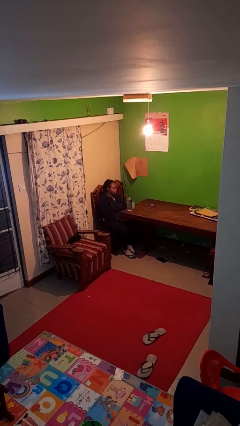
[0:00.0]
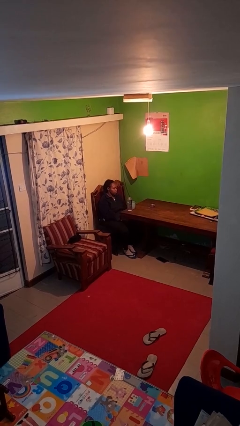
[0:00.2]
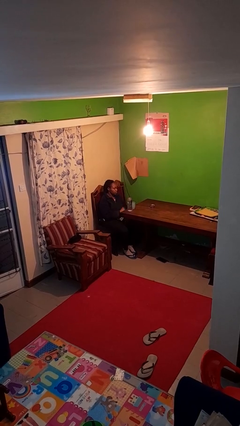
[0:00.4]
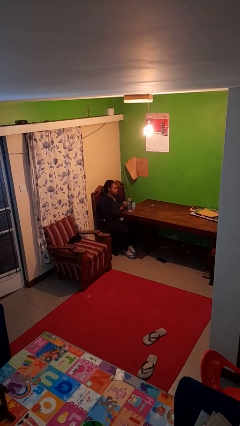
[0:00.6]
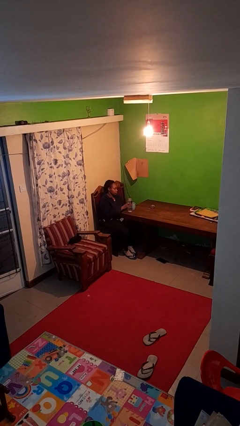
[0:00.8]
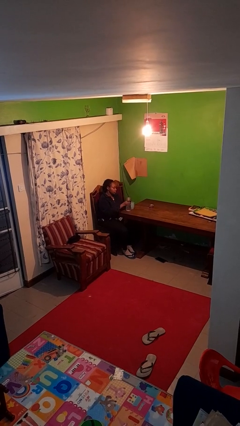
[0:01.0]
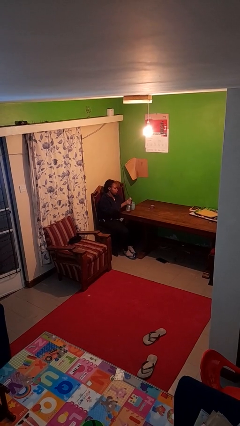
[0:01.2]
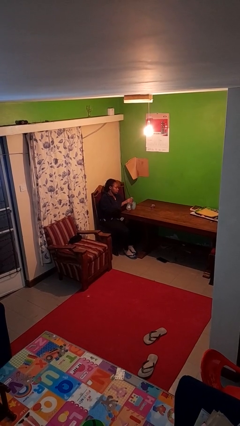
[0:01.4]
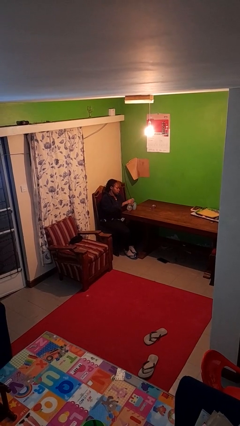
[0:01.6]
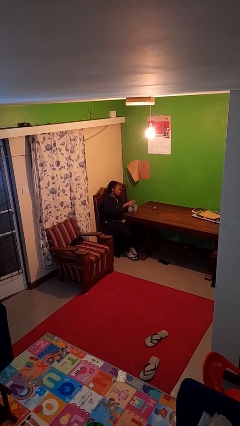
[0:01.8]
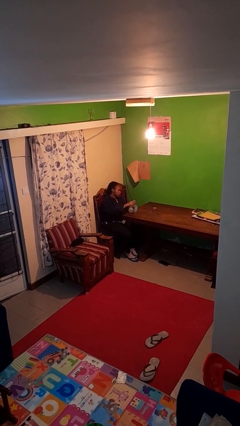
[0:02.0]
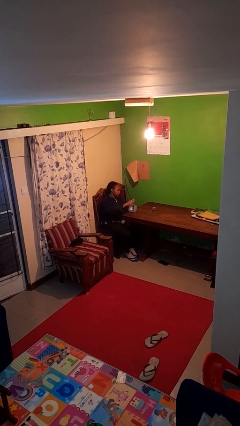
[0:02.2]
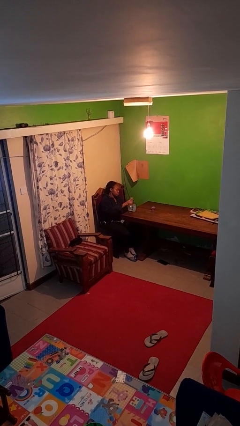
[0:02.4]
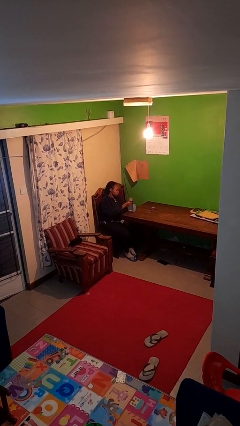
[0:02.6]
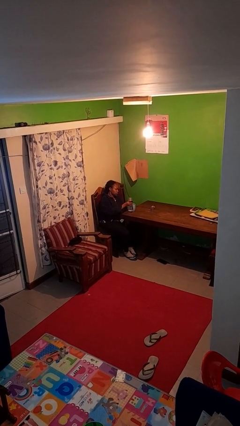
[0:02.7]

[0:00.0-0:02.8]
person pours liquid into cup

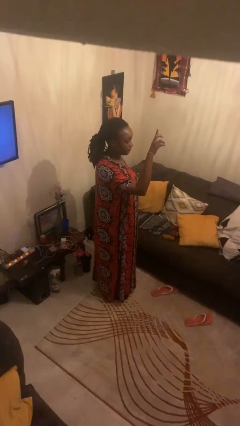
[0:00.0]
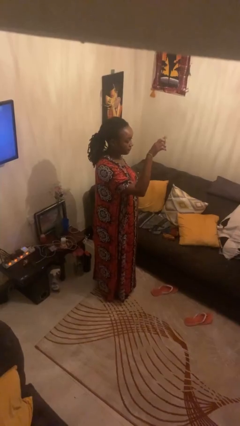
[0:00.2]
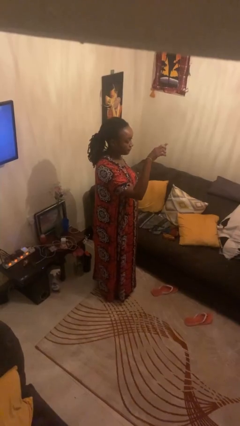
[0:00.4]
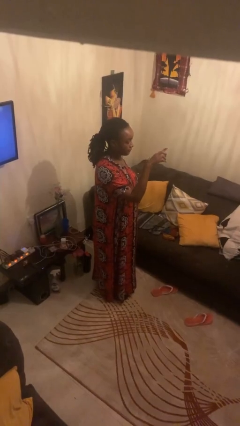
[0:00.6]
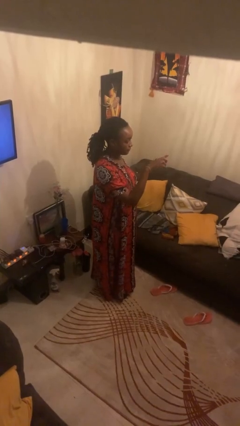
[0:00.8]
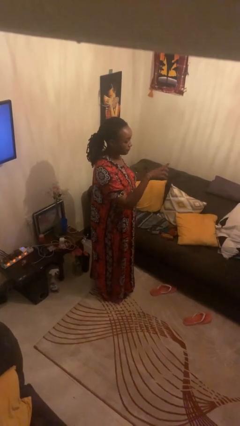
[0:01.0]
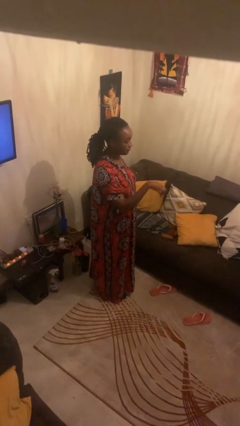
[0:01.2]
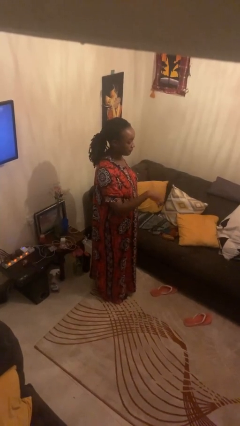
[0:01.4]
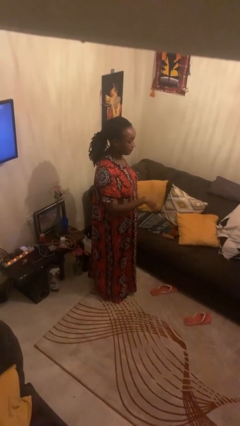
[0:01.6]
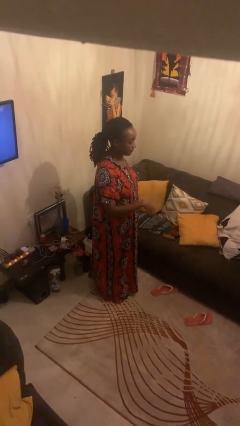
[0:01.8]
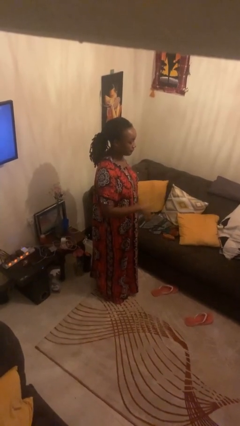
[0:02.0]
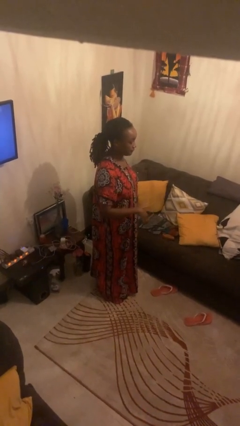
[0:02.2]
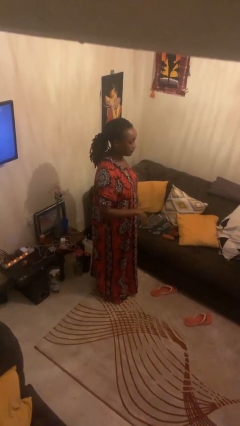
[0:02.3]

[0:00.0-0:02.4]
person gestures swipe down

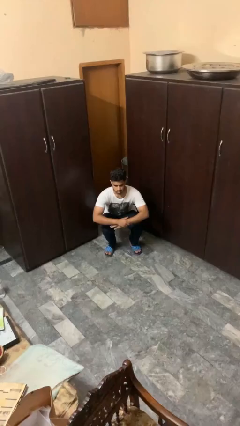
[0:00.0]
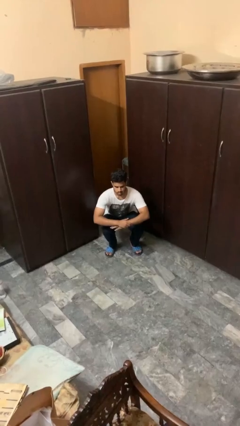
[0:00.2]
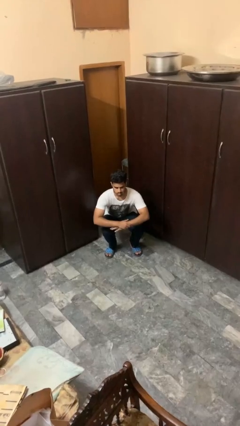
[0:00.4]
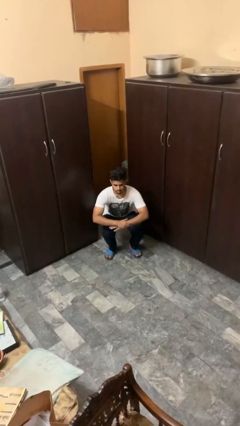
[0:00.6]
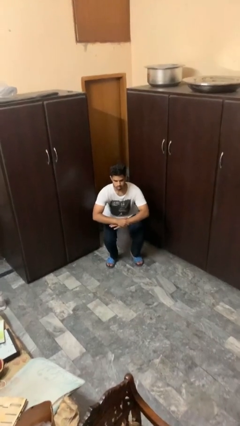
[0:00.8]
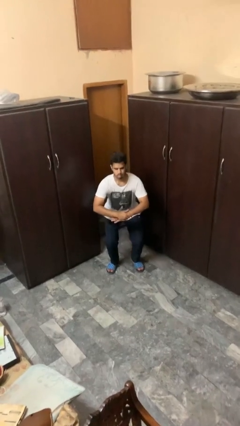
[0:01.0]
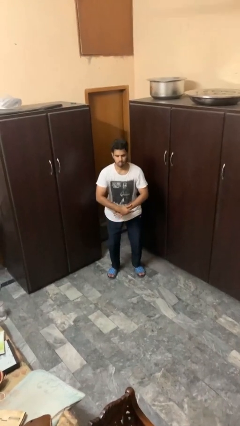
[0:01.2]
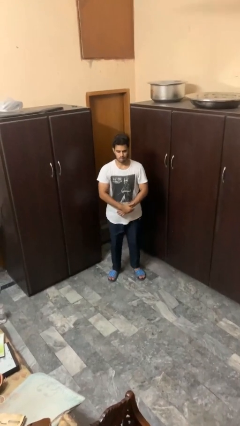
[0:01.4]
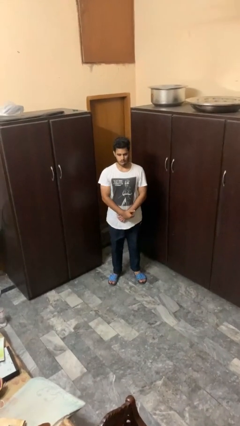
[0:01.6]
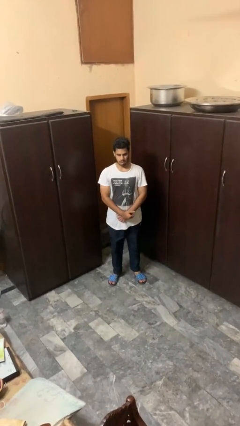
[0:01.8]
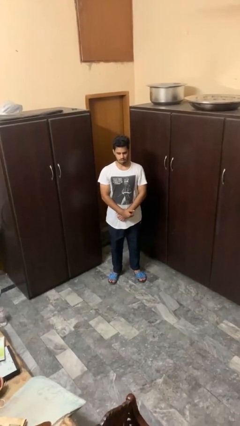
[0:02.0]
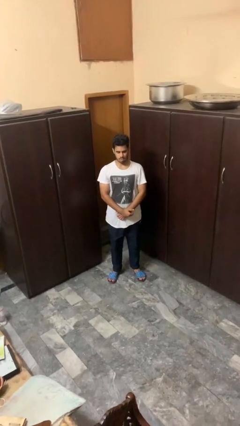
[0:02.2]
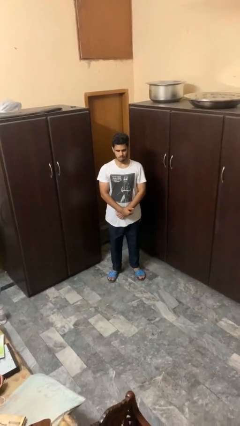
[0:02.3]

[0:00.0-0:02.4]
person stands up

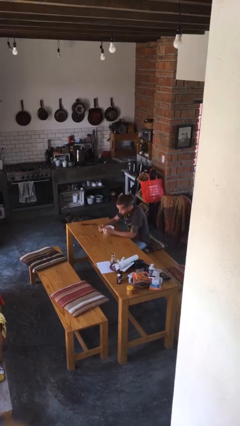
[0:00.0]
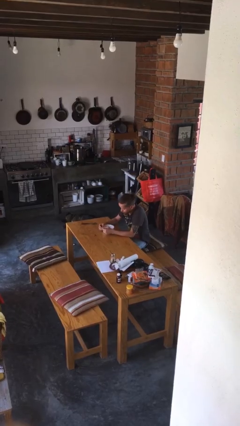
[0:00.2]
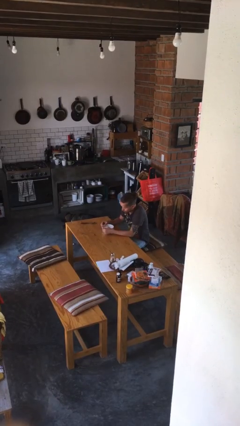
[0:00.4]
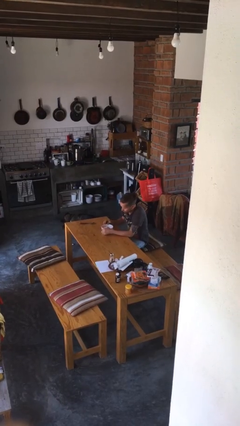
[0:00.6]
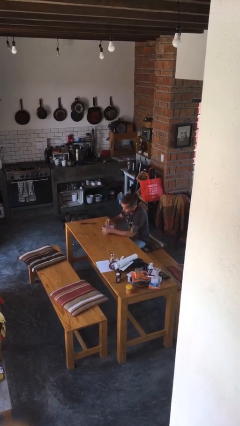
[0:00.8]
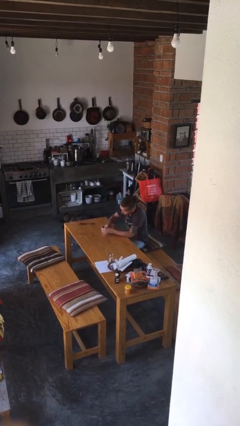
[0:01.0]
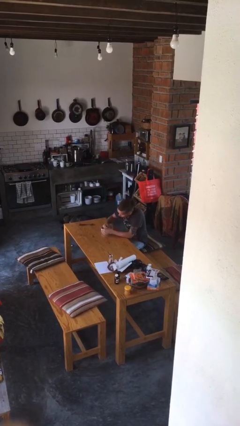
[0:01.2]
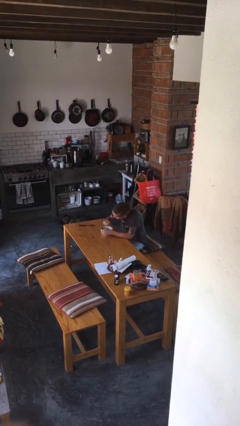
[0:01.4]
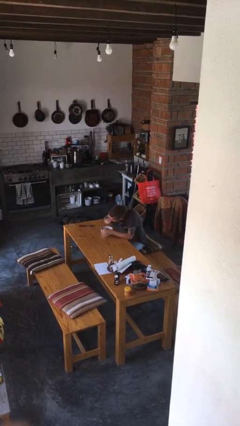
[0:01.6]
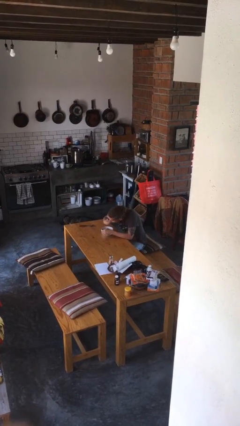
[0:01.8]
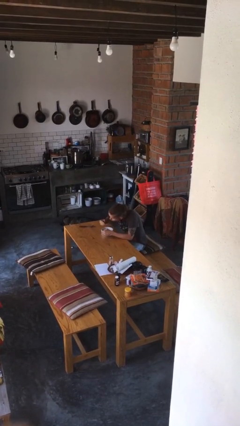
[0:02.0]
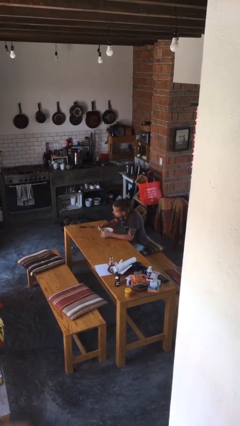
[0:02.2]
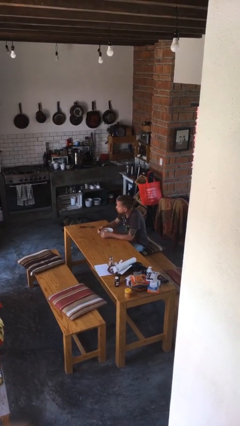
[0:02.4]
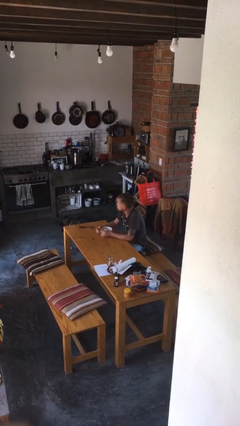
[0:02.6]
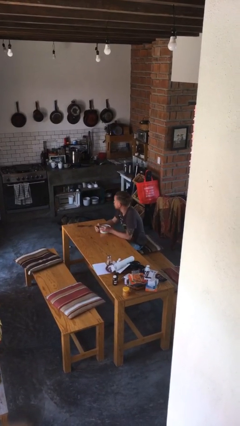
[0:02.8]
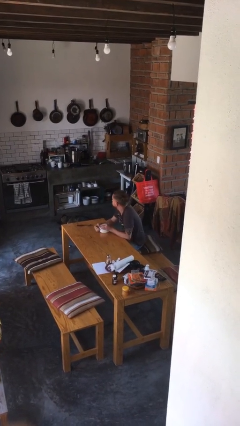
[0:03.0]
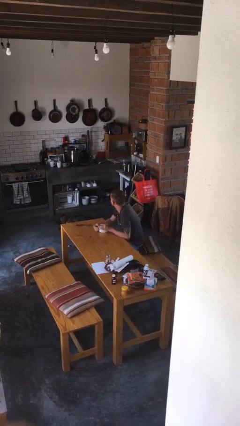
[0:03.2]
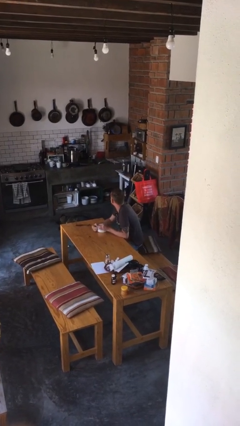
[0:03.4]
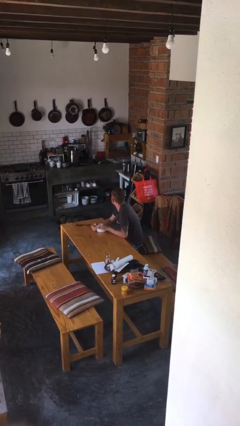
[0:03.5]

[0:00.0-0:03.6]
person eats with hands

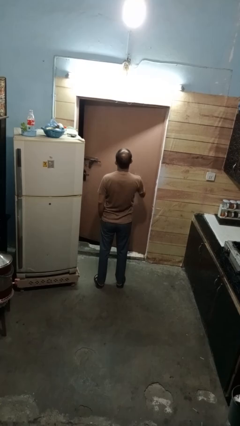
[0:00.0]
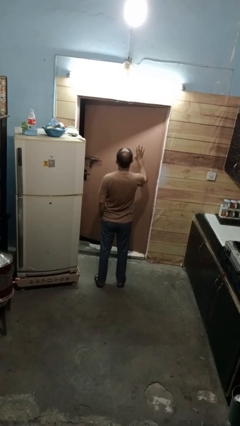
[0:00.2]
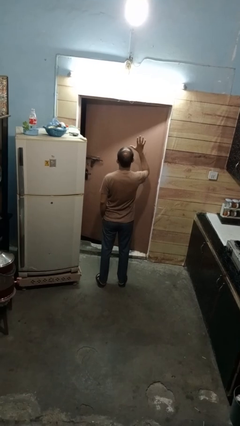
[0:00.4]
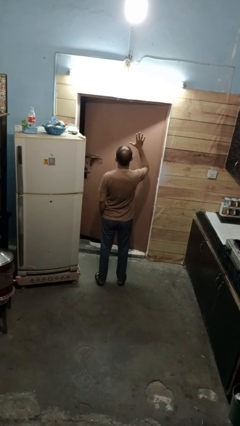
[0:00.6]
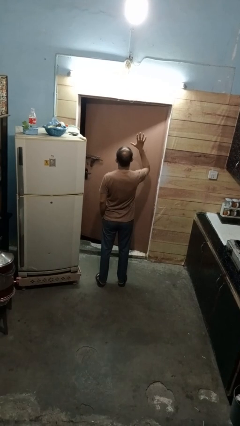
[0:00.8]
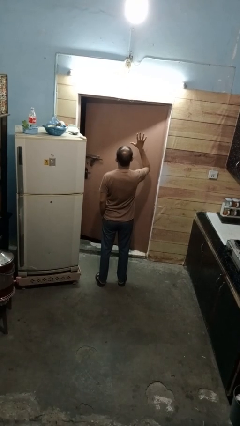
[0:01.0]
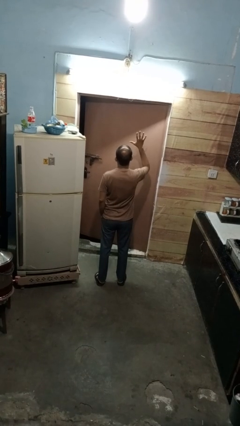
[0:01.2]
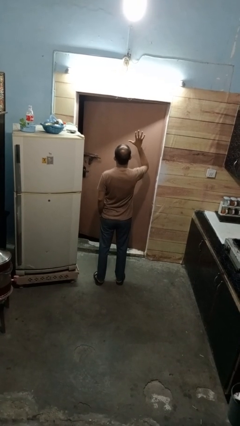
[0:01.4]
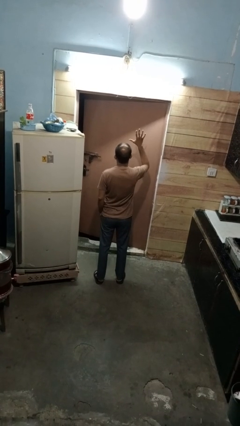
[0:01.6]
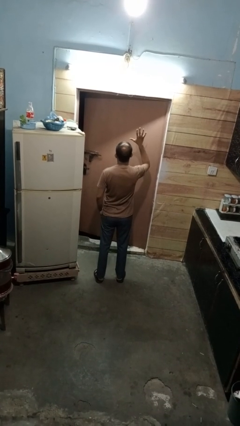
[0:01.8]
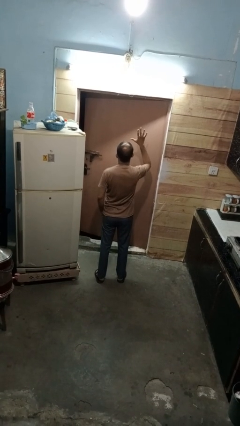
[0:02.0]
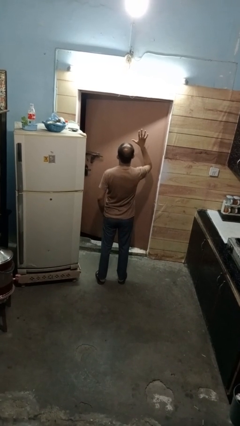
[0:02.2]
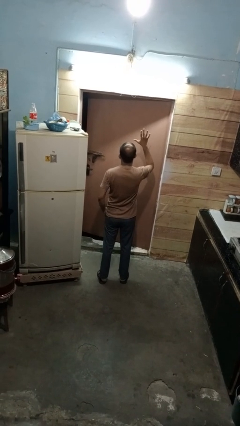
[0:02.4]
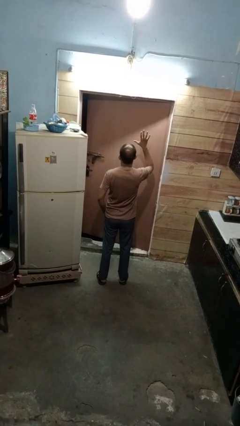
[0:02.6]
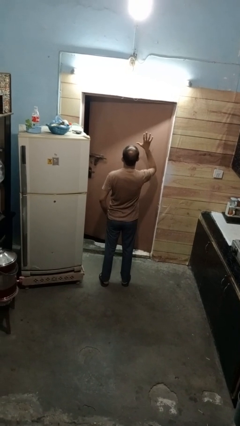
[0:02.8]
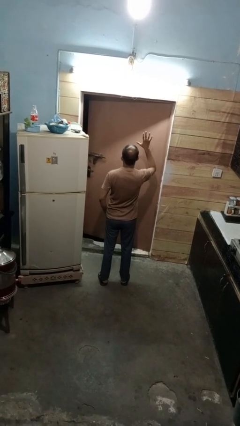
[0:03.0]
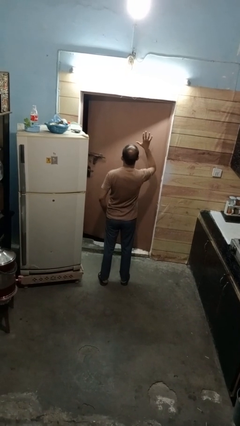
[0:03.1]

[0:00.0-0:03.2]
person gestures number five

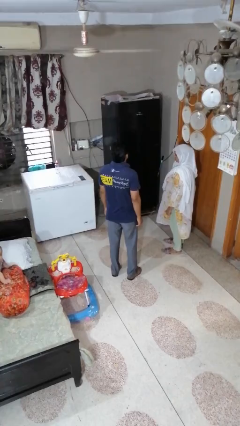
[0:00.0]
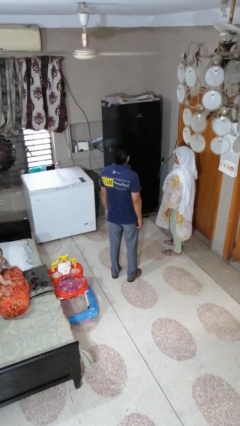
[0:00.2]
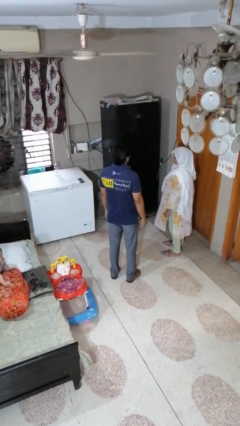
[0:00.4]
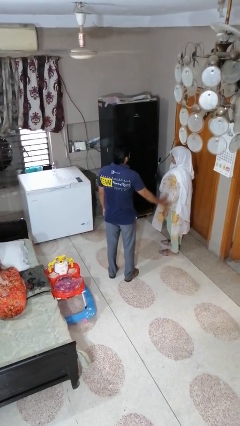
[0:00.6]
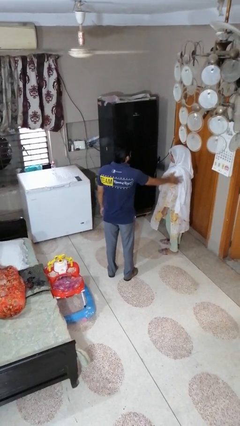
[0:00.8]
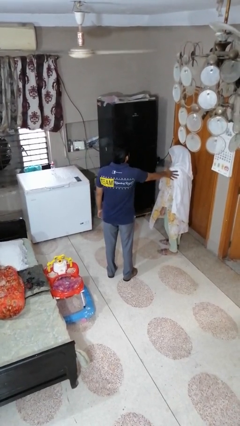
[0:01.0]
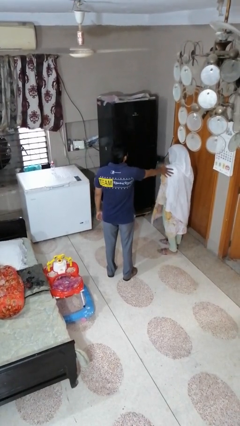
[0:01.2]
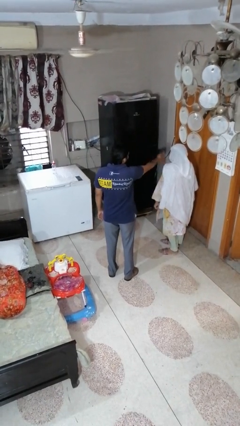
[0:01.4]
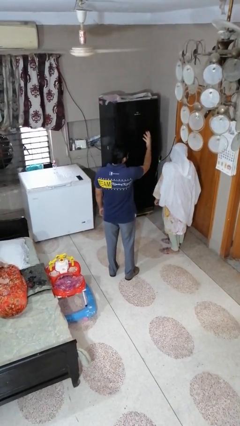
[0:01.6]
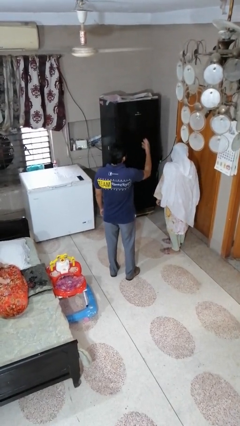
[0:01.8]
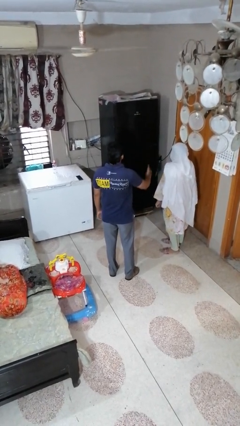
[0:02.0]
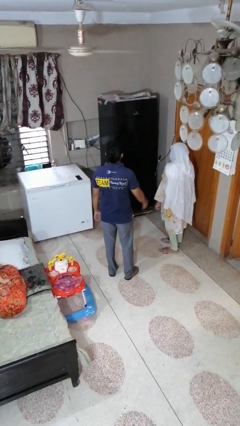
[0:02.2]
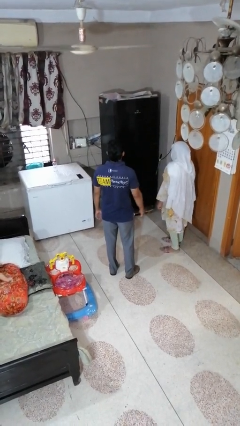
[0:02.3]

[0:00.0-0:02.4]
person shoves person

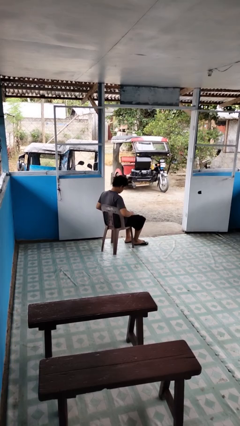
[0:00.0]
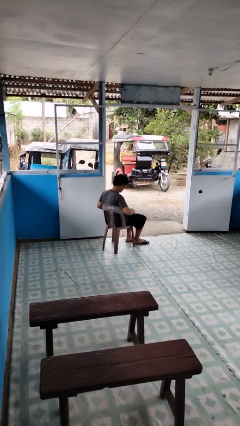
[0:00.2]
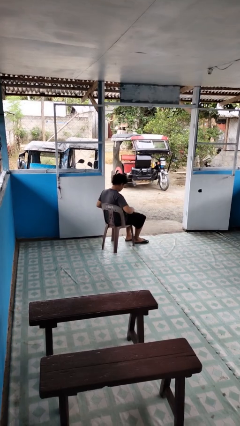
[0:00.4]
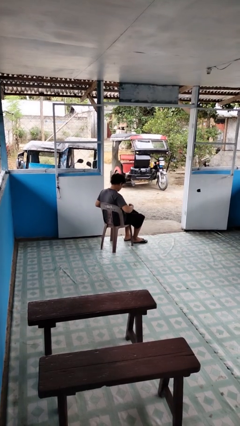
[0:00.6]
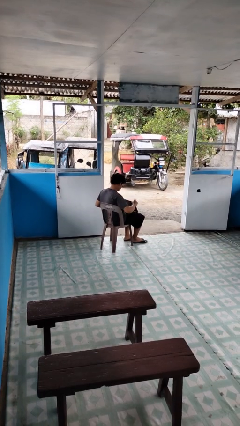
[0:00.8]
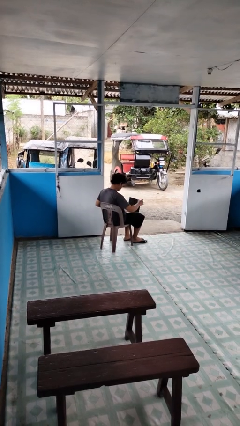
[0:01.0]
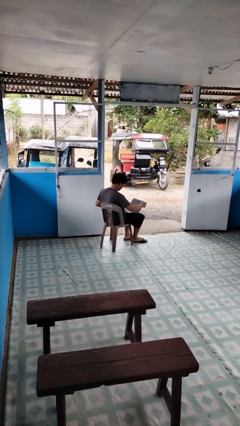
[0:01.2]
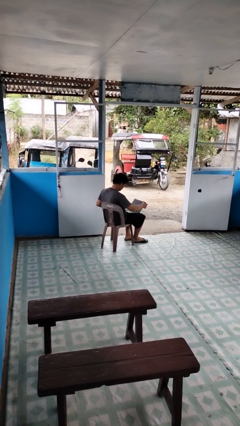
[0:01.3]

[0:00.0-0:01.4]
person opens laptop
